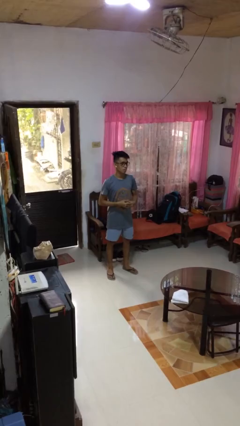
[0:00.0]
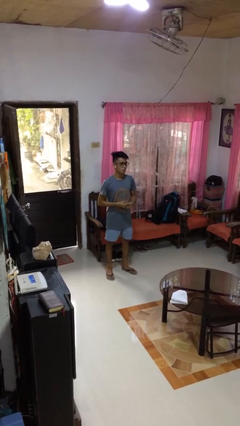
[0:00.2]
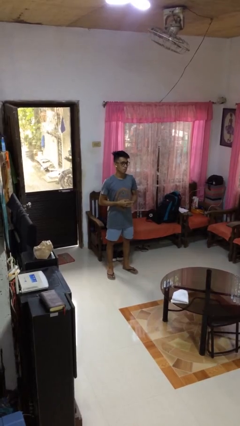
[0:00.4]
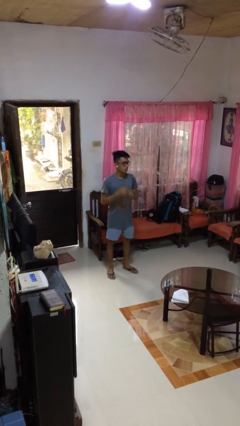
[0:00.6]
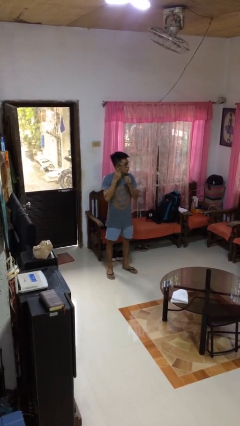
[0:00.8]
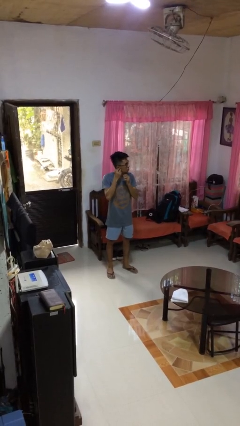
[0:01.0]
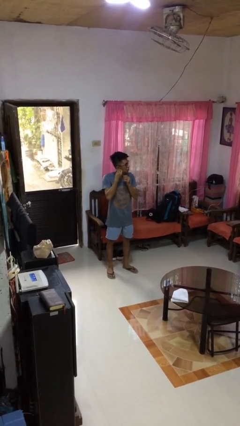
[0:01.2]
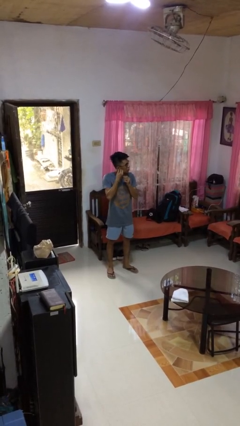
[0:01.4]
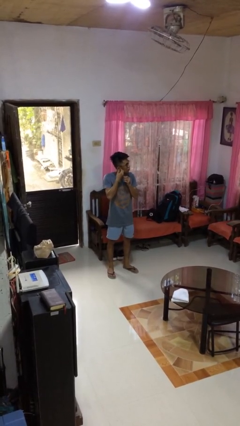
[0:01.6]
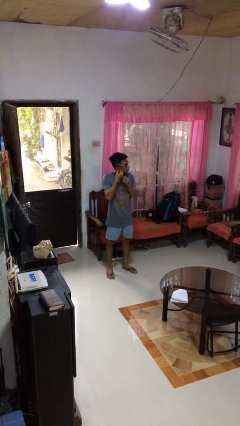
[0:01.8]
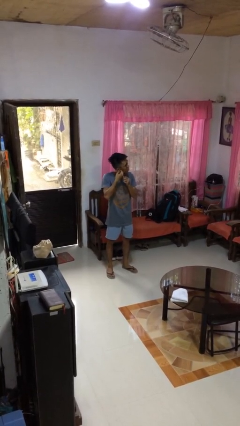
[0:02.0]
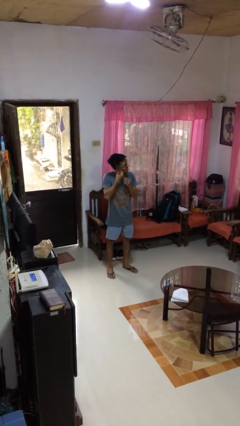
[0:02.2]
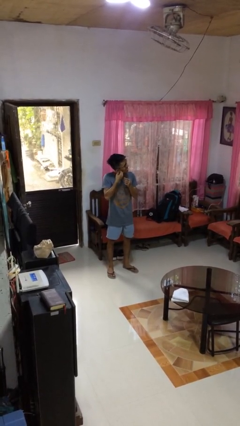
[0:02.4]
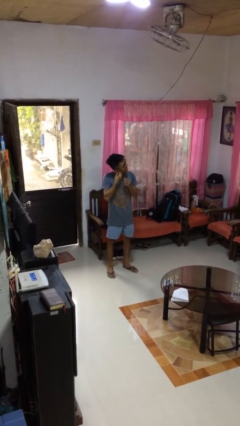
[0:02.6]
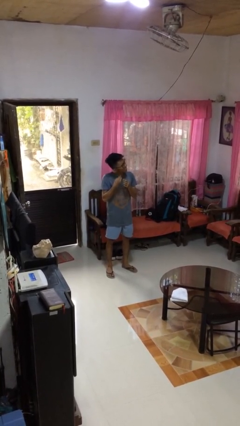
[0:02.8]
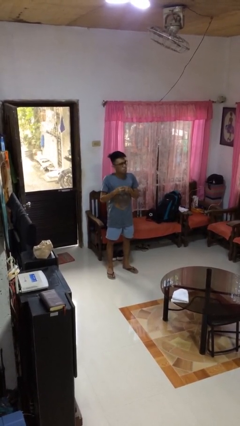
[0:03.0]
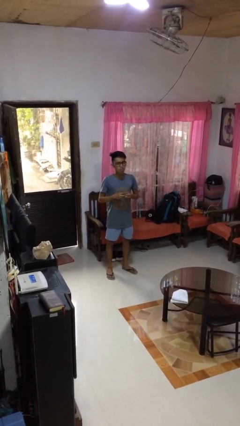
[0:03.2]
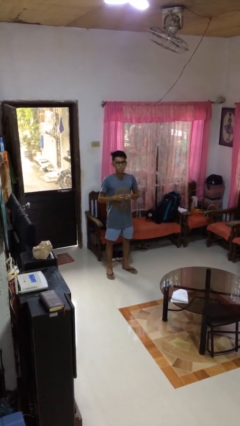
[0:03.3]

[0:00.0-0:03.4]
person takes off earrings

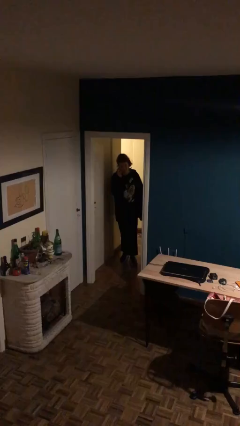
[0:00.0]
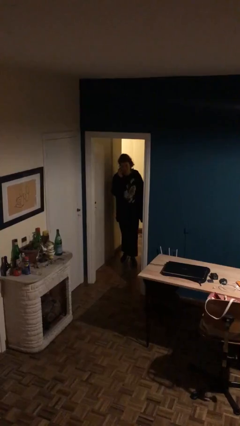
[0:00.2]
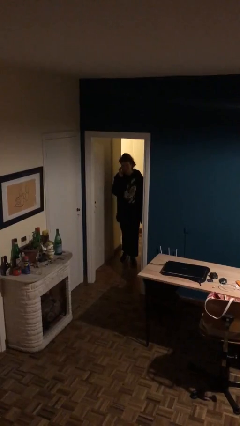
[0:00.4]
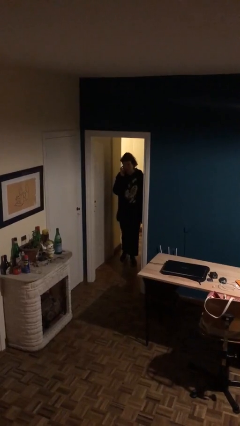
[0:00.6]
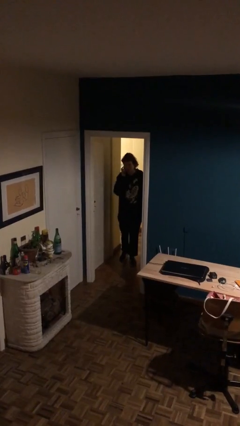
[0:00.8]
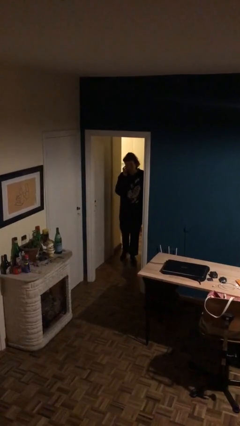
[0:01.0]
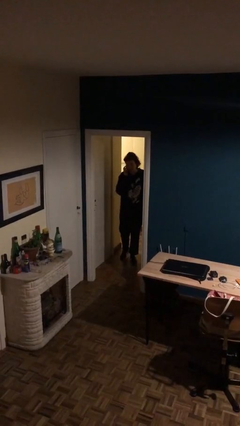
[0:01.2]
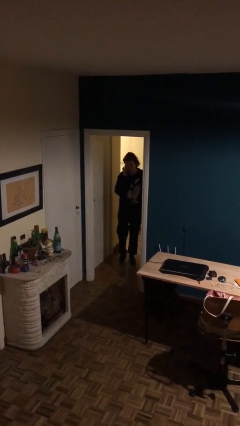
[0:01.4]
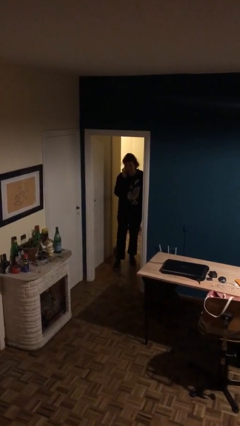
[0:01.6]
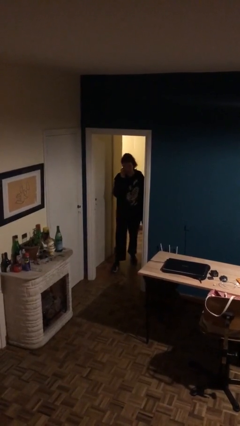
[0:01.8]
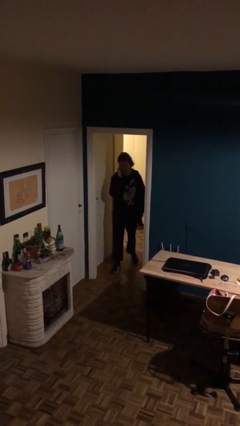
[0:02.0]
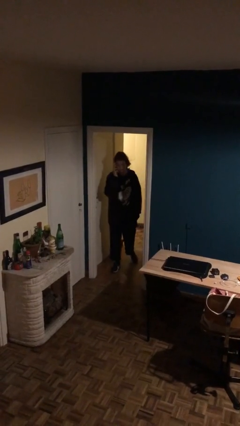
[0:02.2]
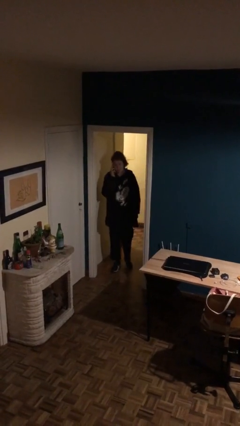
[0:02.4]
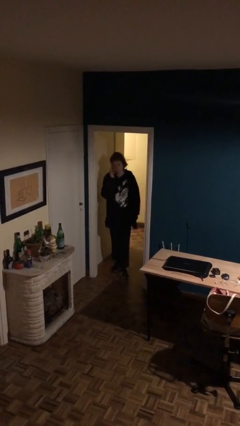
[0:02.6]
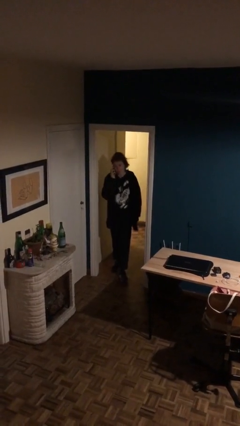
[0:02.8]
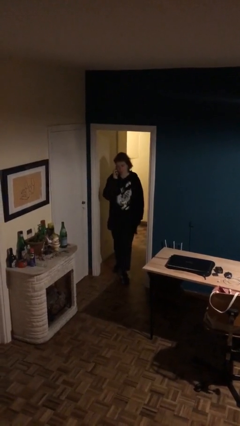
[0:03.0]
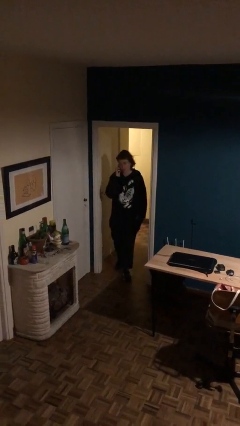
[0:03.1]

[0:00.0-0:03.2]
person enters scene through structure

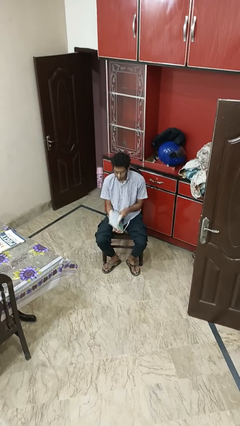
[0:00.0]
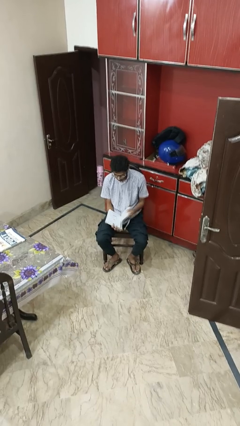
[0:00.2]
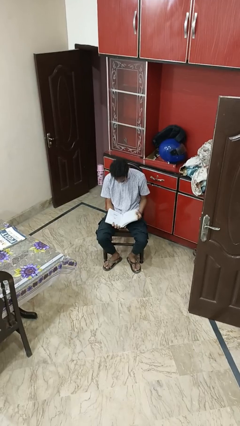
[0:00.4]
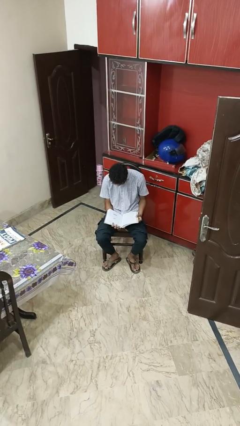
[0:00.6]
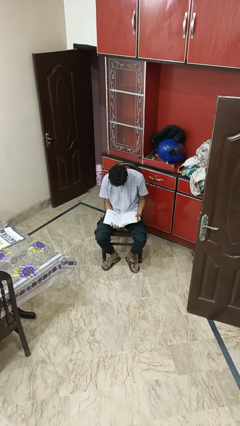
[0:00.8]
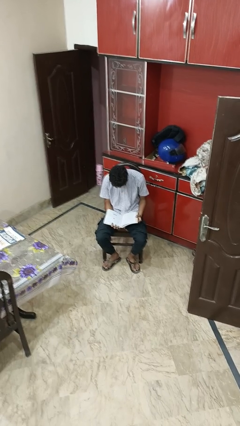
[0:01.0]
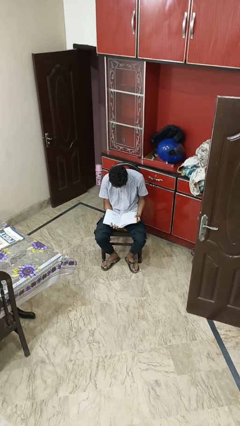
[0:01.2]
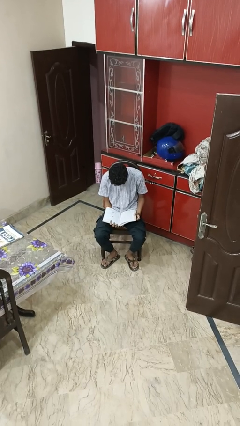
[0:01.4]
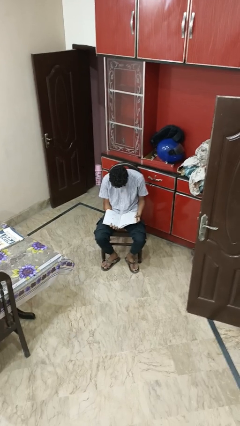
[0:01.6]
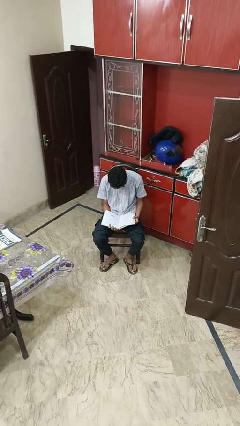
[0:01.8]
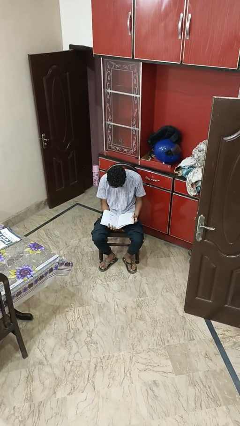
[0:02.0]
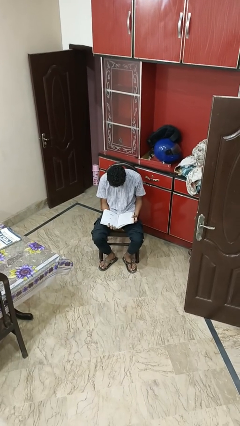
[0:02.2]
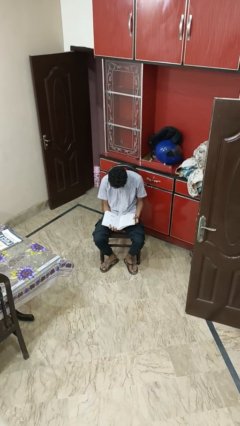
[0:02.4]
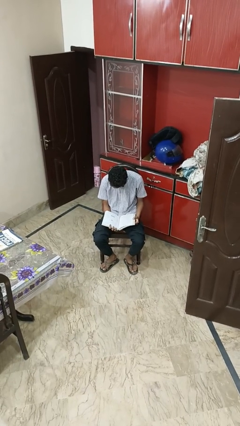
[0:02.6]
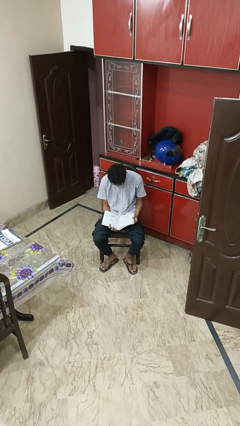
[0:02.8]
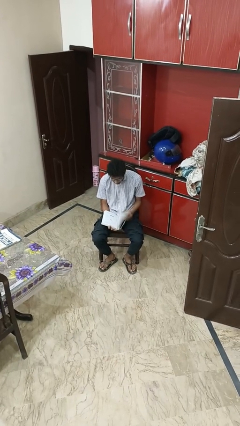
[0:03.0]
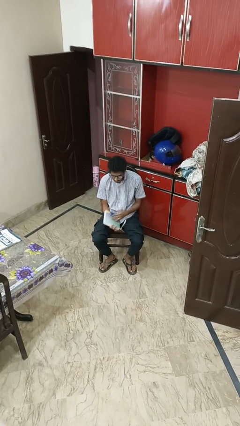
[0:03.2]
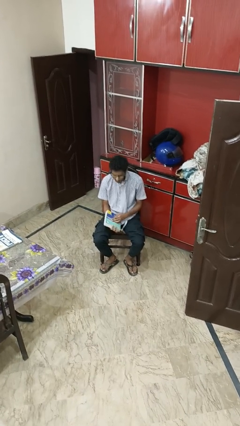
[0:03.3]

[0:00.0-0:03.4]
person reads book

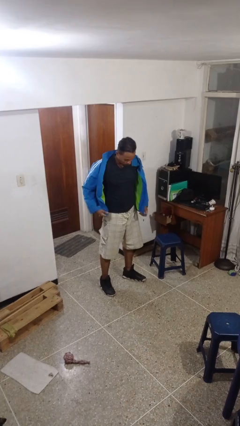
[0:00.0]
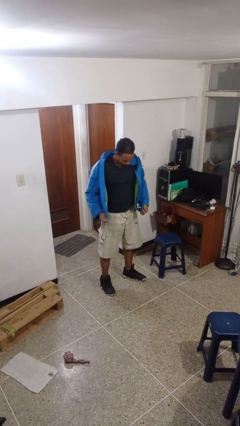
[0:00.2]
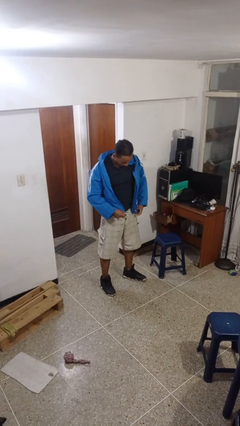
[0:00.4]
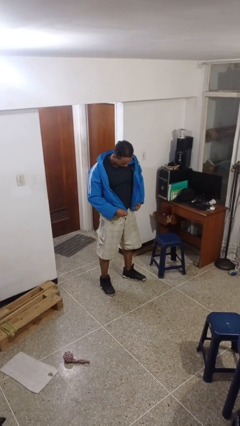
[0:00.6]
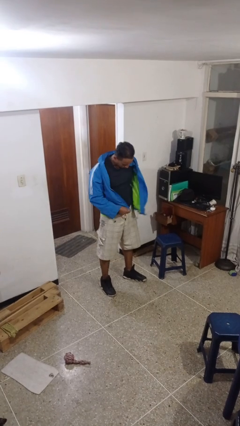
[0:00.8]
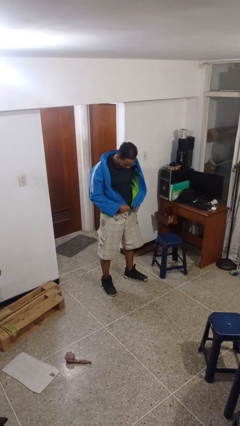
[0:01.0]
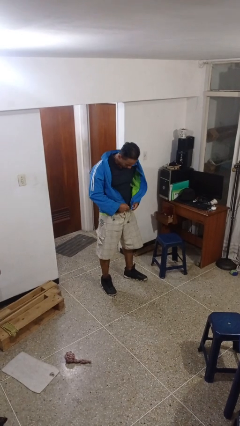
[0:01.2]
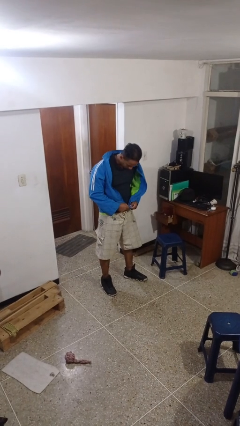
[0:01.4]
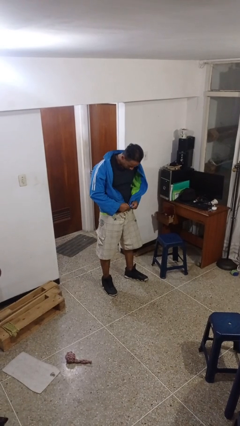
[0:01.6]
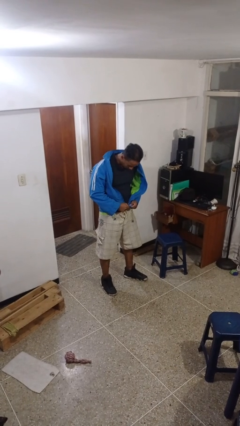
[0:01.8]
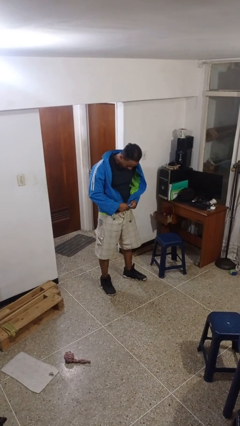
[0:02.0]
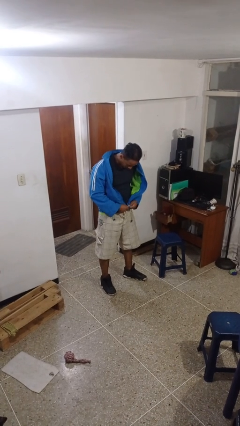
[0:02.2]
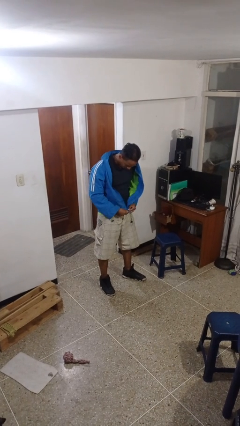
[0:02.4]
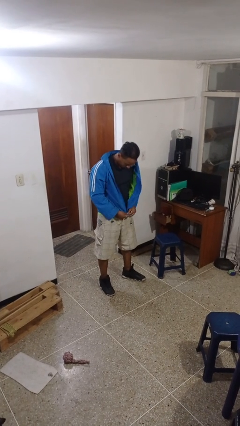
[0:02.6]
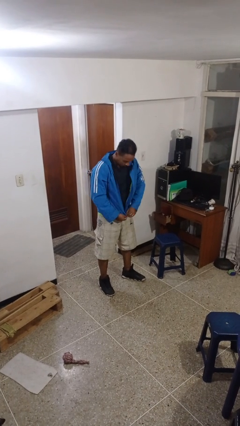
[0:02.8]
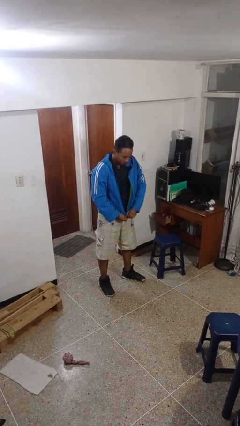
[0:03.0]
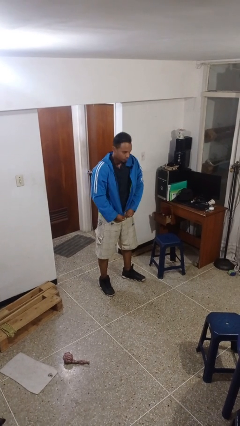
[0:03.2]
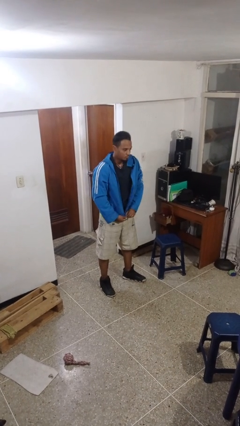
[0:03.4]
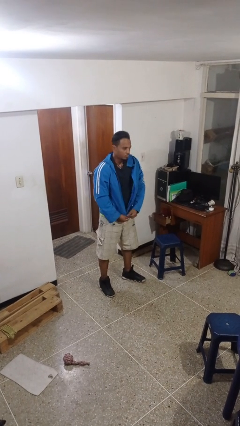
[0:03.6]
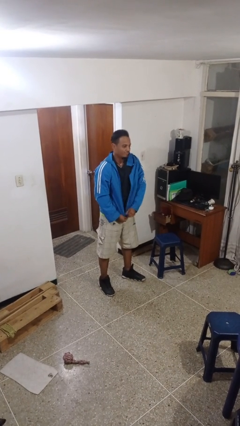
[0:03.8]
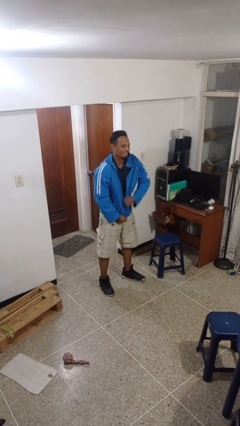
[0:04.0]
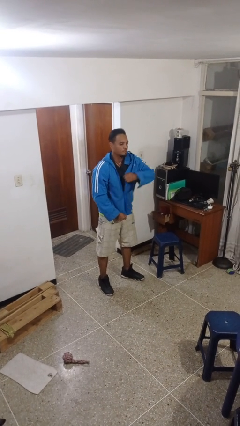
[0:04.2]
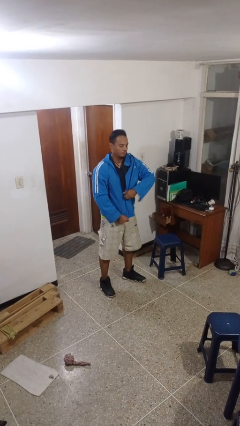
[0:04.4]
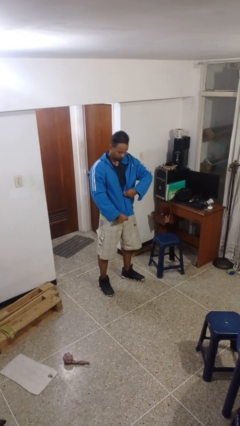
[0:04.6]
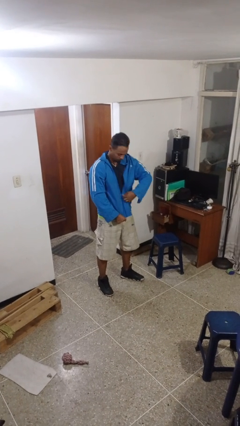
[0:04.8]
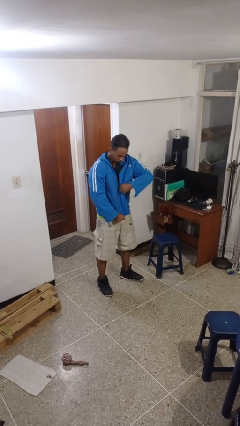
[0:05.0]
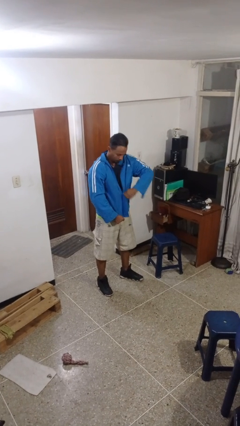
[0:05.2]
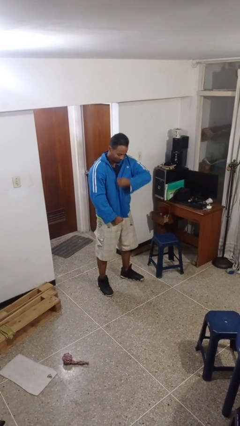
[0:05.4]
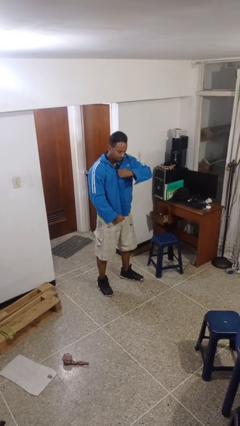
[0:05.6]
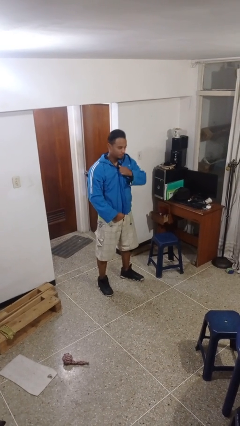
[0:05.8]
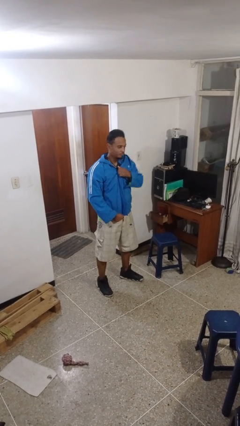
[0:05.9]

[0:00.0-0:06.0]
person zips up jacket

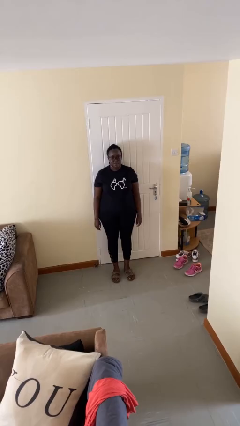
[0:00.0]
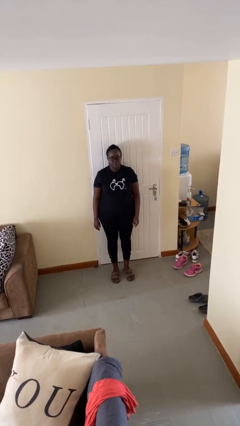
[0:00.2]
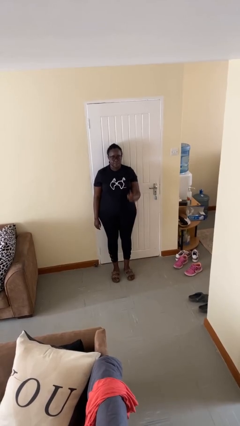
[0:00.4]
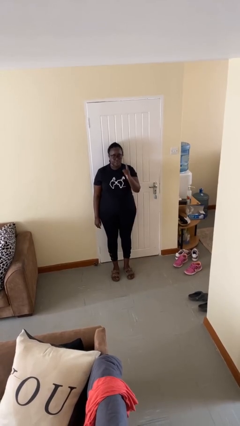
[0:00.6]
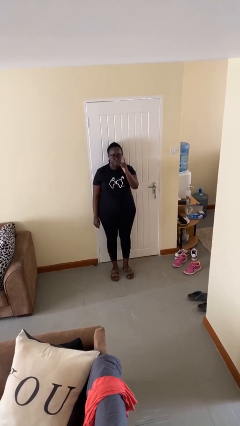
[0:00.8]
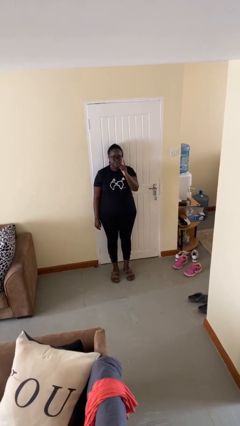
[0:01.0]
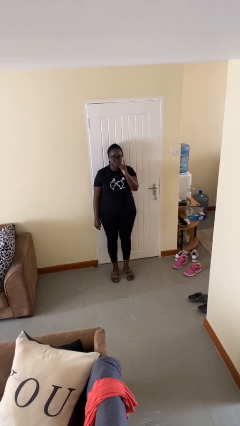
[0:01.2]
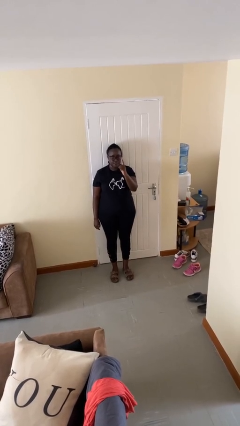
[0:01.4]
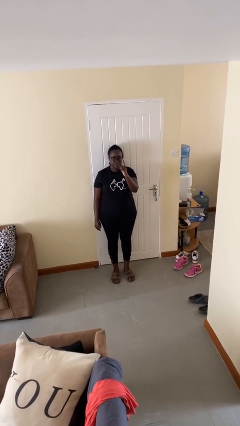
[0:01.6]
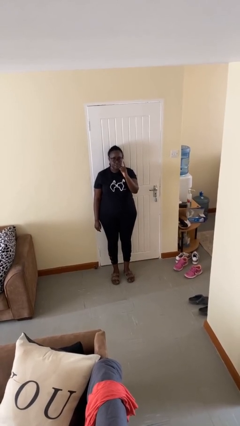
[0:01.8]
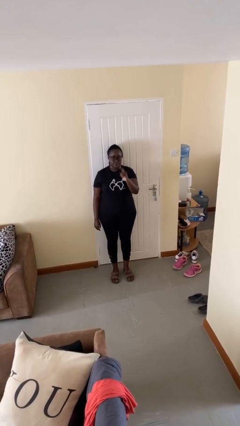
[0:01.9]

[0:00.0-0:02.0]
person gestures number one
